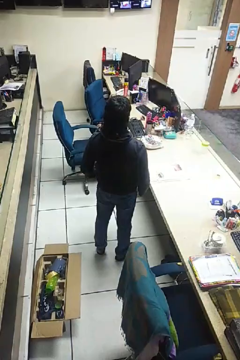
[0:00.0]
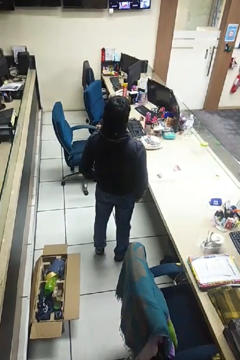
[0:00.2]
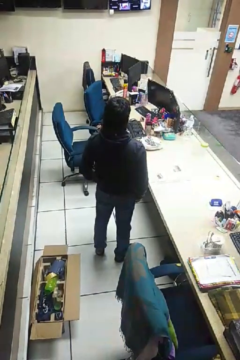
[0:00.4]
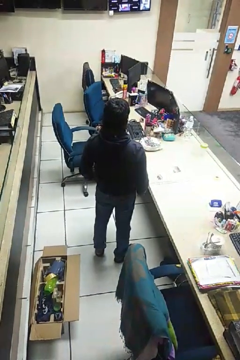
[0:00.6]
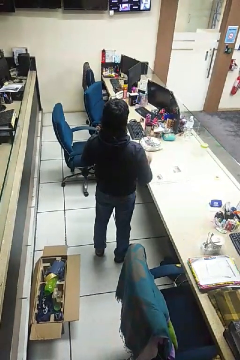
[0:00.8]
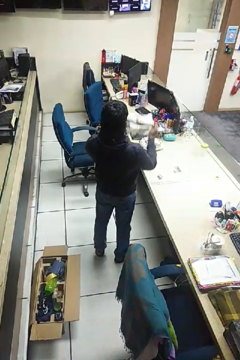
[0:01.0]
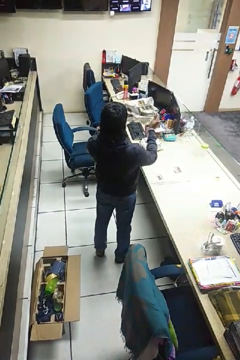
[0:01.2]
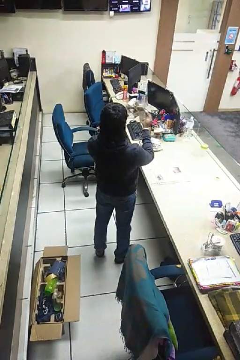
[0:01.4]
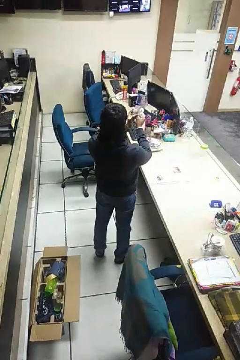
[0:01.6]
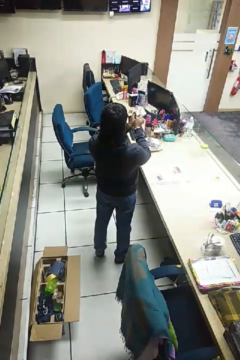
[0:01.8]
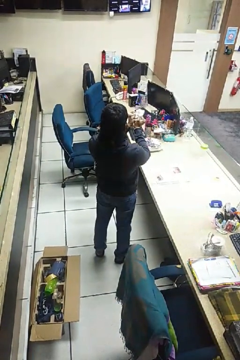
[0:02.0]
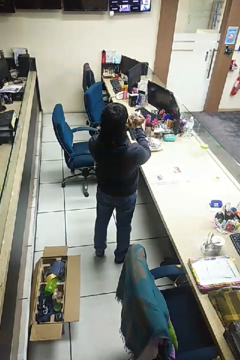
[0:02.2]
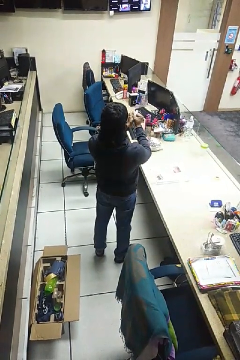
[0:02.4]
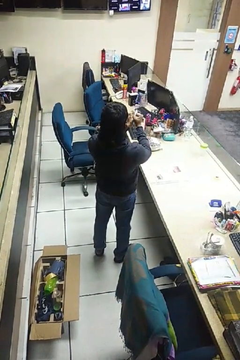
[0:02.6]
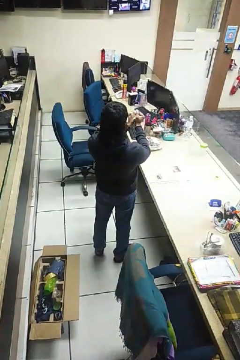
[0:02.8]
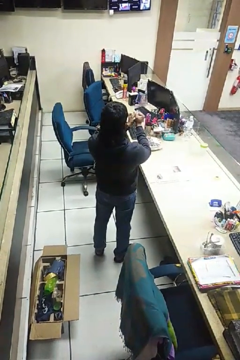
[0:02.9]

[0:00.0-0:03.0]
person crumples paper

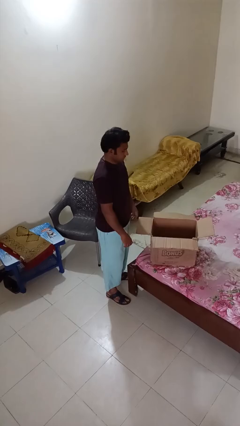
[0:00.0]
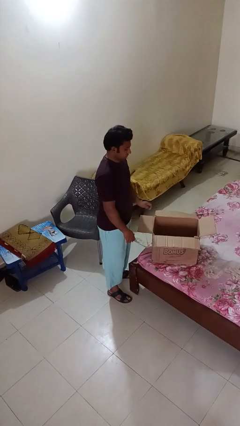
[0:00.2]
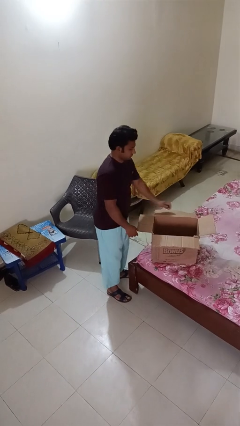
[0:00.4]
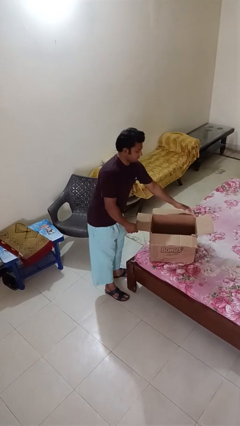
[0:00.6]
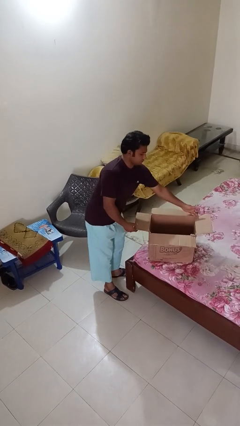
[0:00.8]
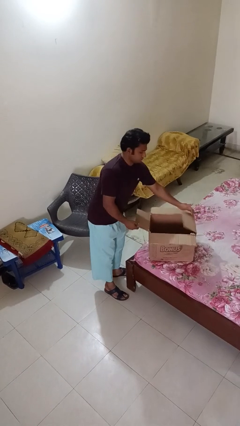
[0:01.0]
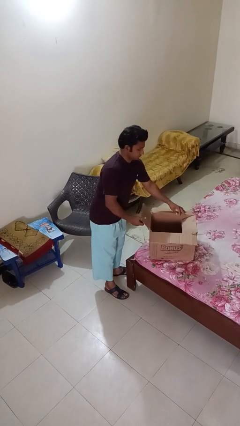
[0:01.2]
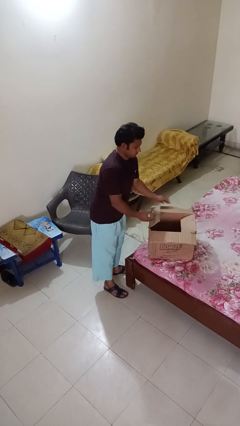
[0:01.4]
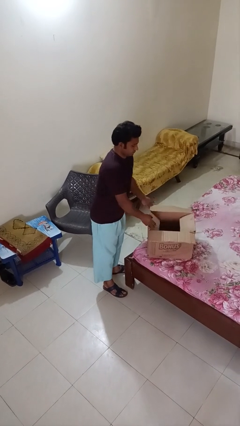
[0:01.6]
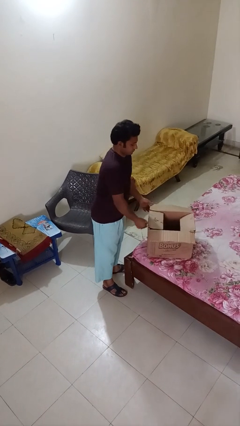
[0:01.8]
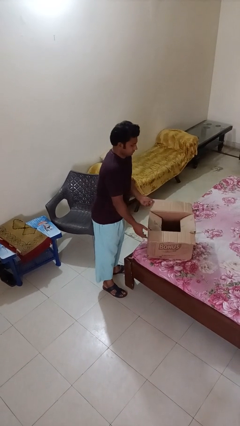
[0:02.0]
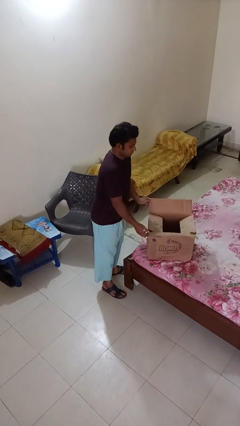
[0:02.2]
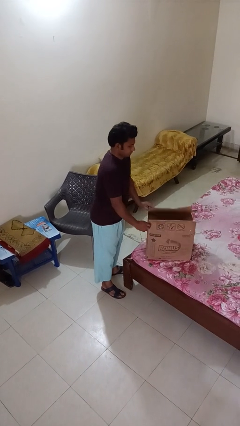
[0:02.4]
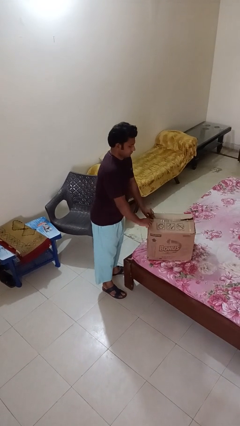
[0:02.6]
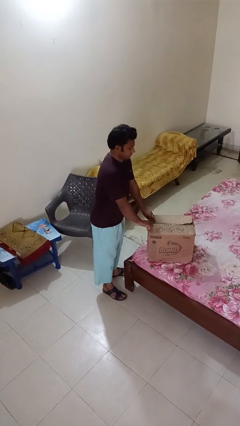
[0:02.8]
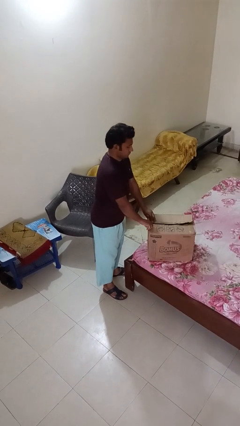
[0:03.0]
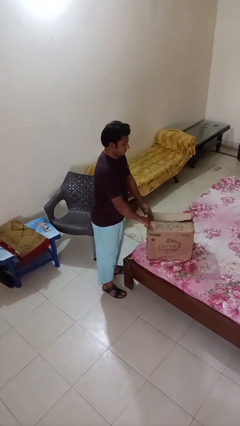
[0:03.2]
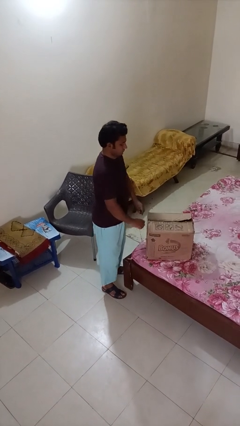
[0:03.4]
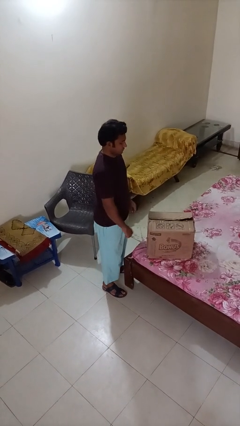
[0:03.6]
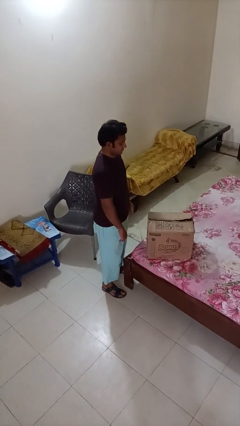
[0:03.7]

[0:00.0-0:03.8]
person closes box

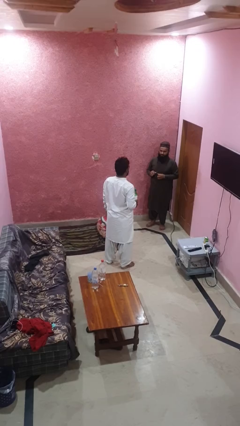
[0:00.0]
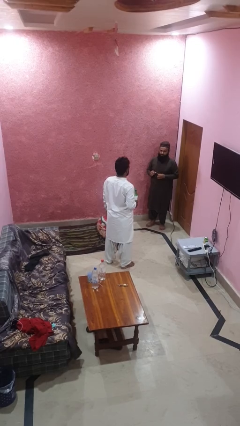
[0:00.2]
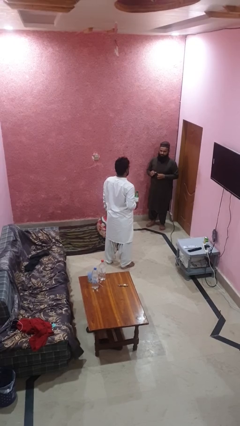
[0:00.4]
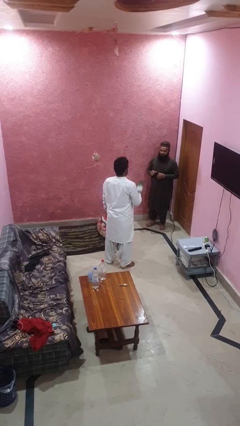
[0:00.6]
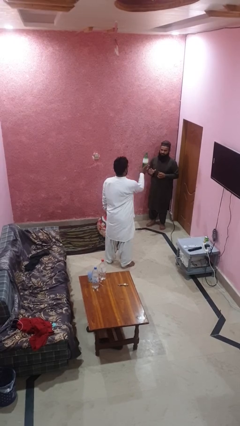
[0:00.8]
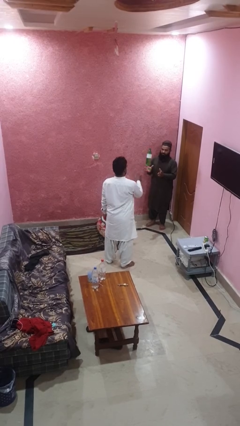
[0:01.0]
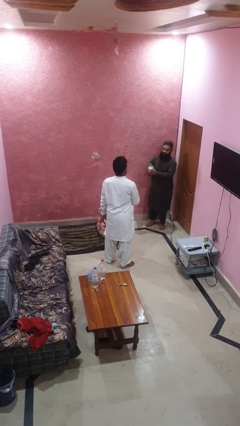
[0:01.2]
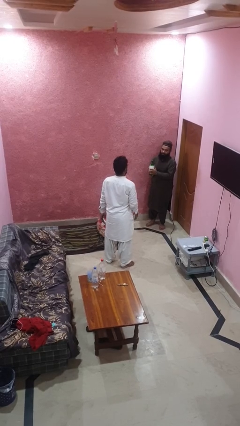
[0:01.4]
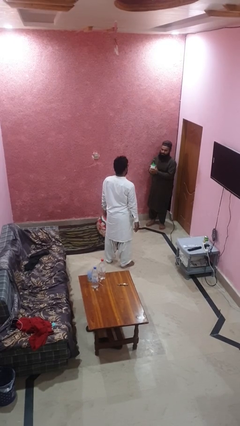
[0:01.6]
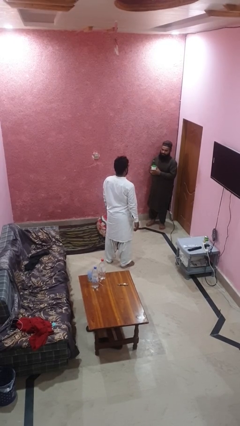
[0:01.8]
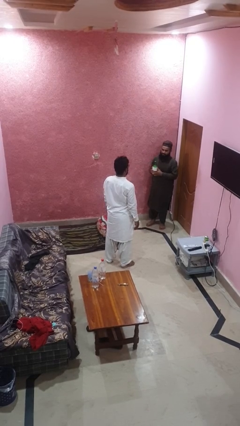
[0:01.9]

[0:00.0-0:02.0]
person throws object to person

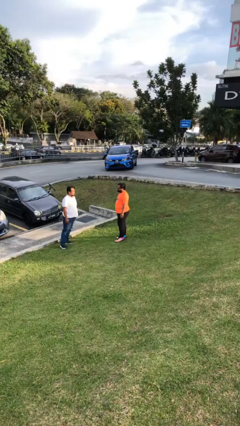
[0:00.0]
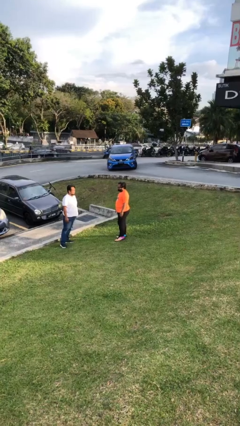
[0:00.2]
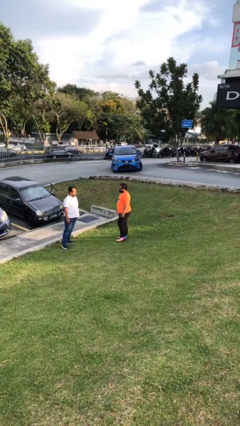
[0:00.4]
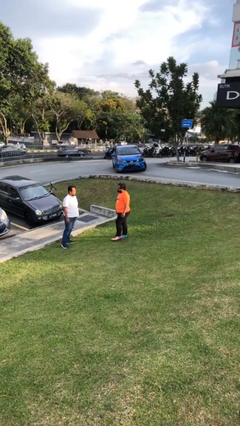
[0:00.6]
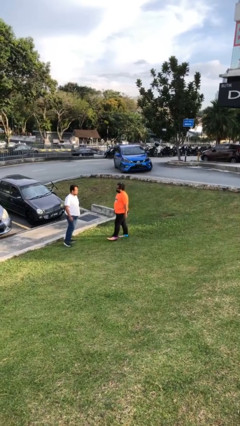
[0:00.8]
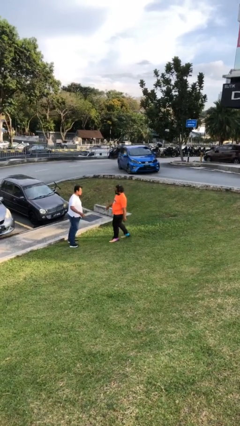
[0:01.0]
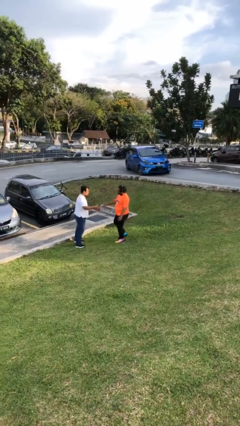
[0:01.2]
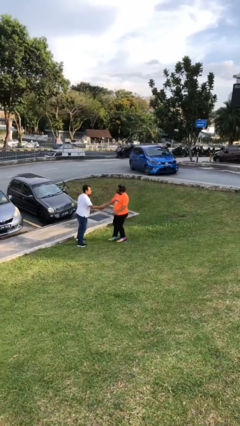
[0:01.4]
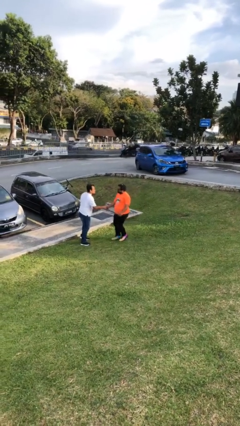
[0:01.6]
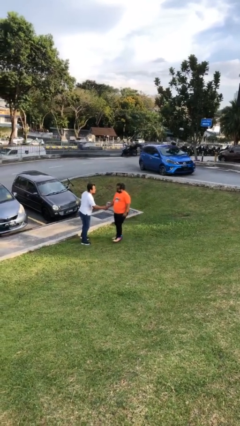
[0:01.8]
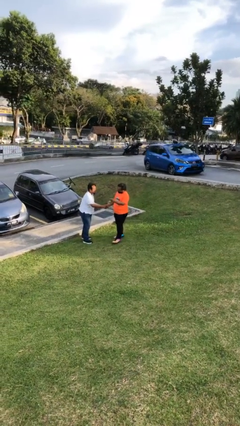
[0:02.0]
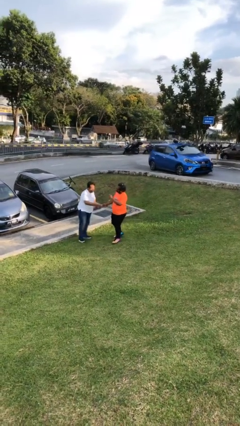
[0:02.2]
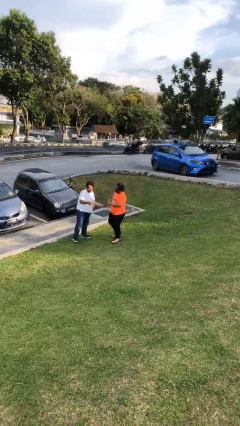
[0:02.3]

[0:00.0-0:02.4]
person shakes hand

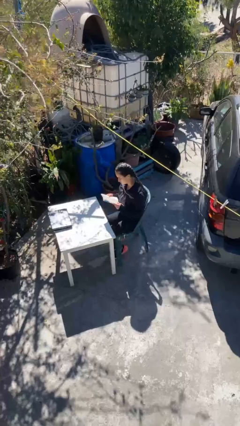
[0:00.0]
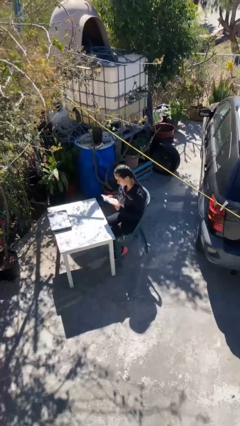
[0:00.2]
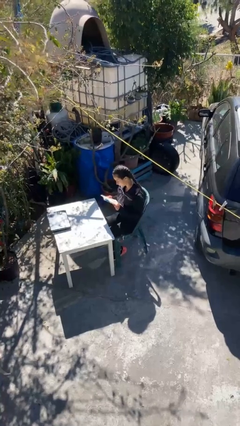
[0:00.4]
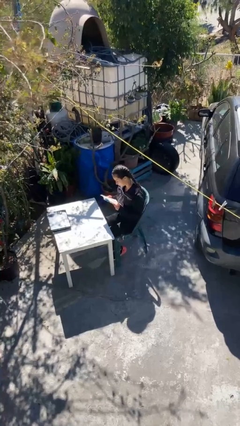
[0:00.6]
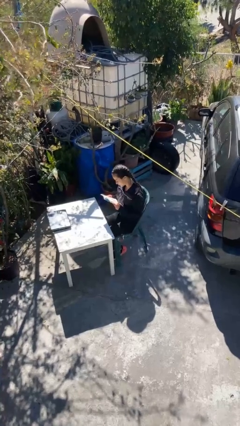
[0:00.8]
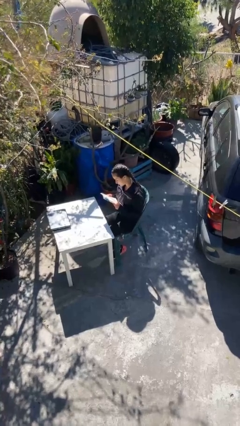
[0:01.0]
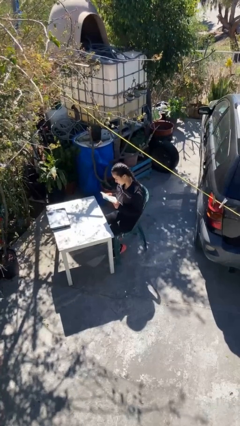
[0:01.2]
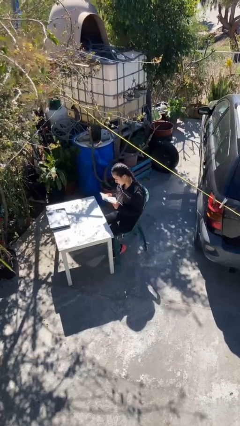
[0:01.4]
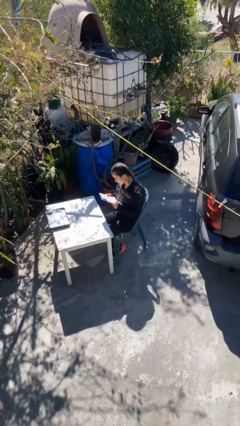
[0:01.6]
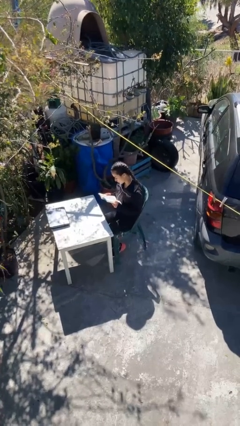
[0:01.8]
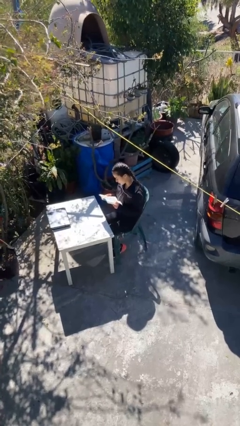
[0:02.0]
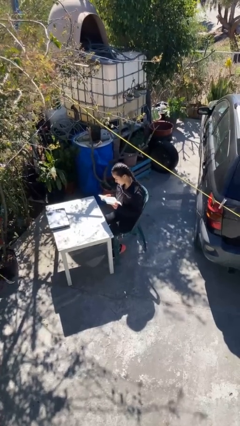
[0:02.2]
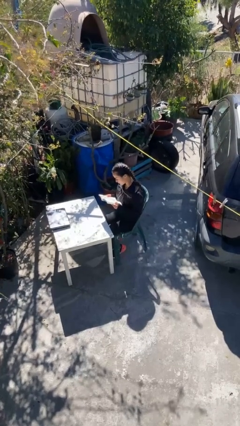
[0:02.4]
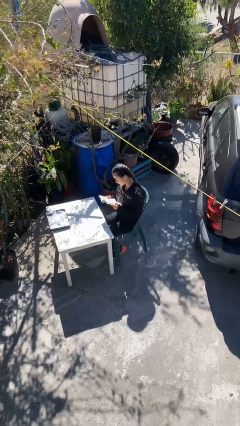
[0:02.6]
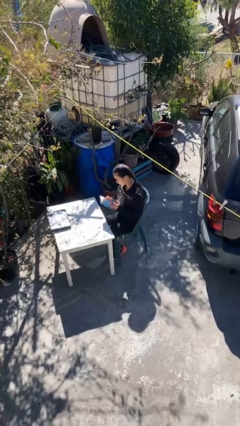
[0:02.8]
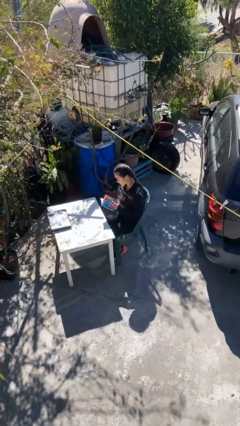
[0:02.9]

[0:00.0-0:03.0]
person reads document

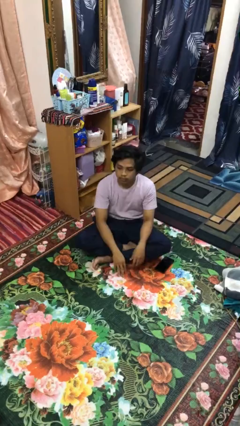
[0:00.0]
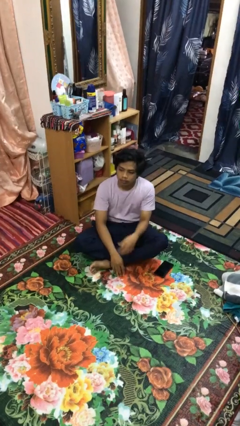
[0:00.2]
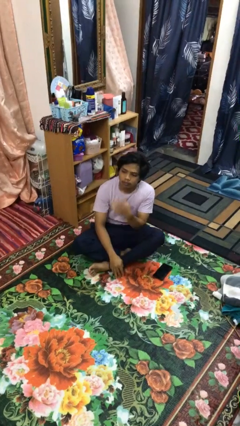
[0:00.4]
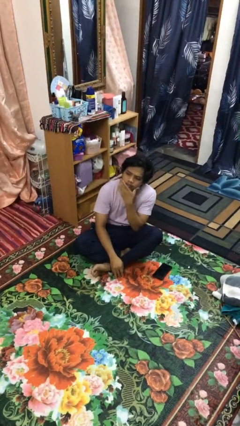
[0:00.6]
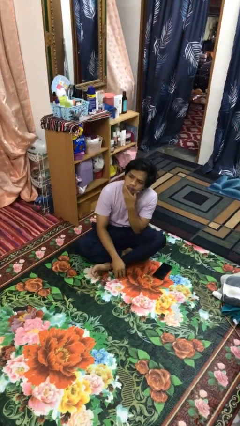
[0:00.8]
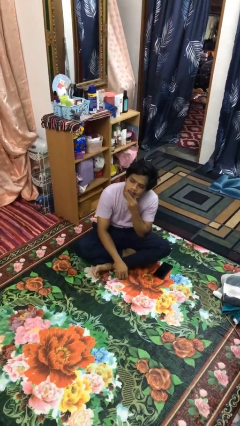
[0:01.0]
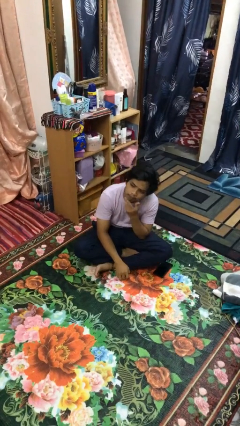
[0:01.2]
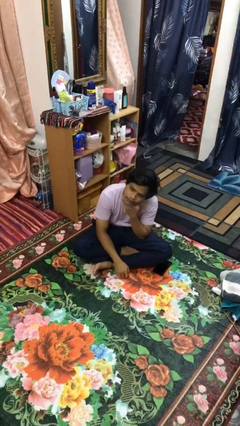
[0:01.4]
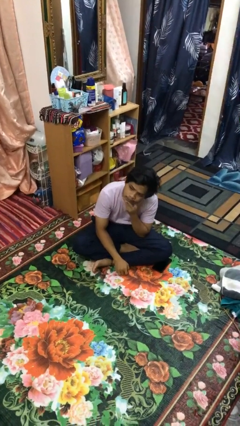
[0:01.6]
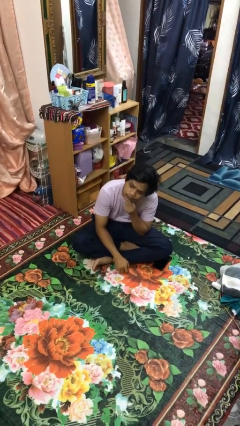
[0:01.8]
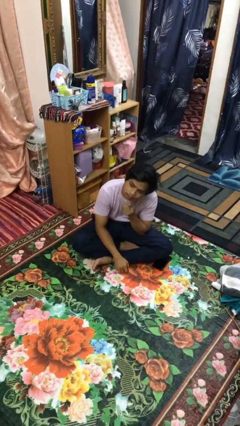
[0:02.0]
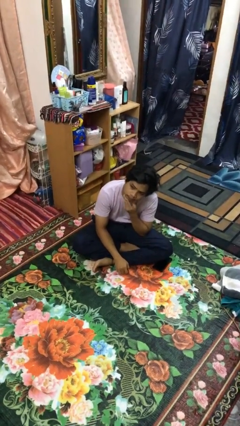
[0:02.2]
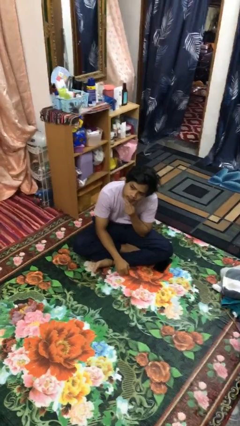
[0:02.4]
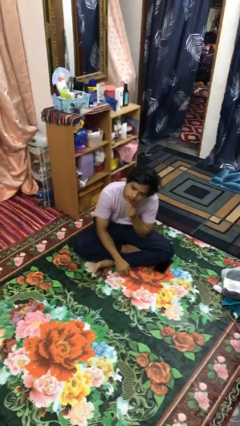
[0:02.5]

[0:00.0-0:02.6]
person strokes chin

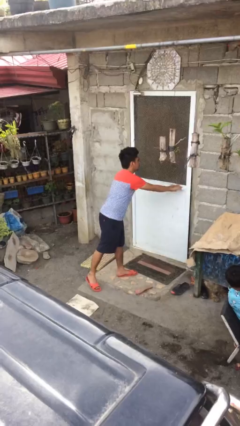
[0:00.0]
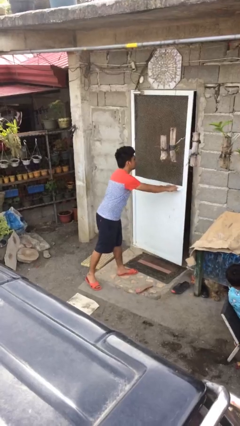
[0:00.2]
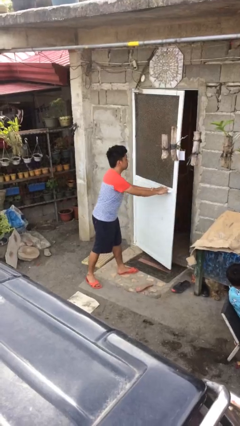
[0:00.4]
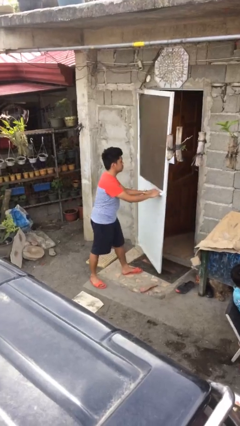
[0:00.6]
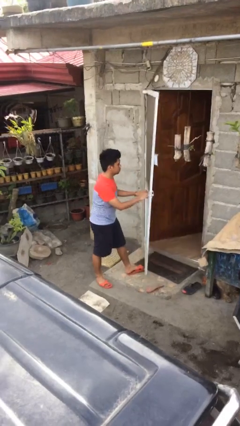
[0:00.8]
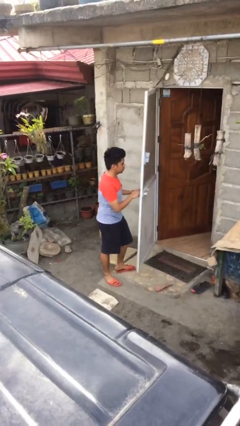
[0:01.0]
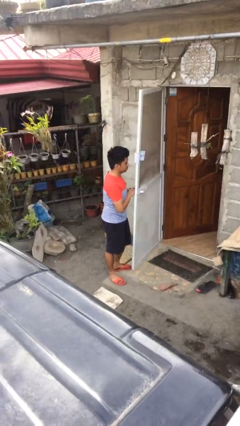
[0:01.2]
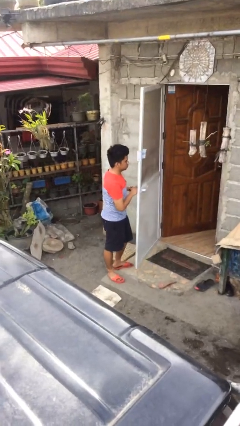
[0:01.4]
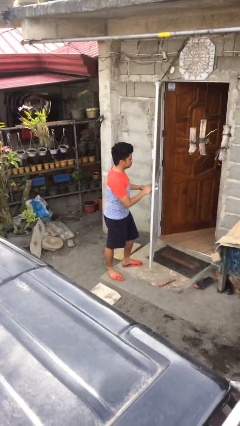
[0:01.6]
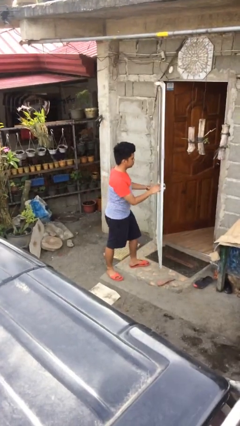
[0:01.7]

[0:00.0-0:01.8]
person opens facility door
